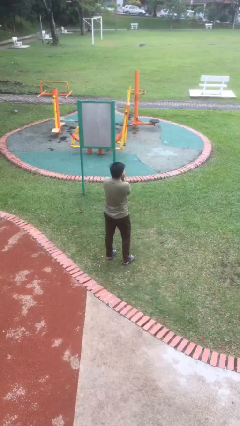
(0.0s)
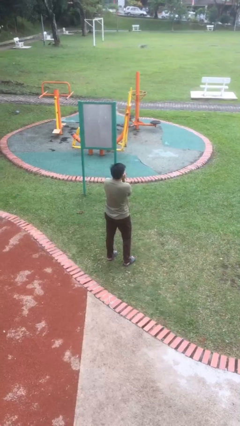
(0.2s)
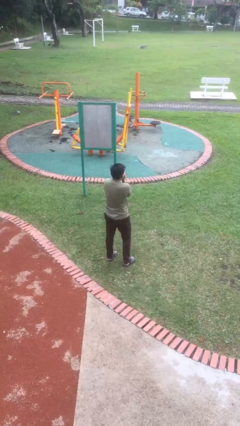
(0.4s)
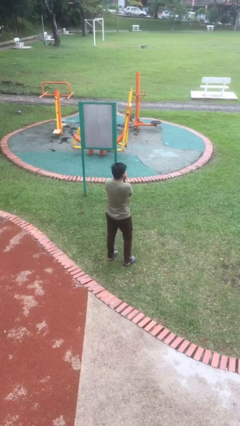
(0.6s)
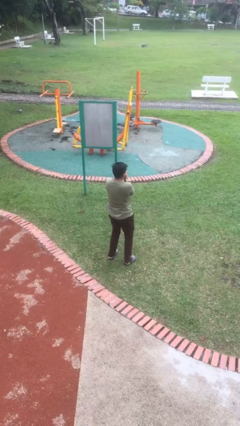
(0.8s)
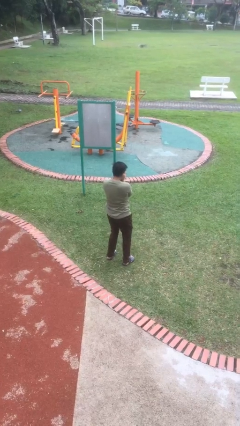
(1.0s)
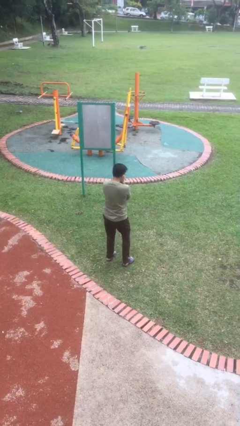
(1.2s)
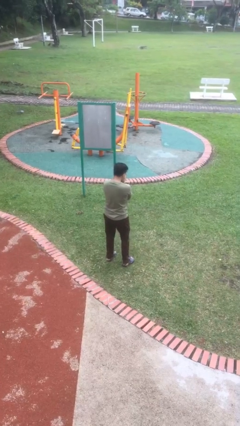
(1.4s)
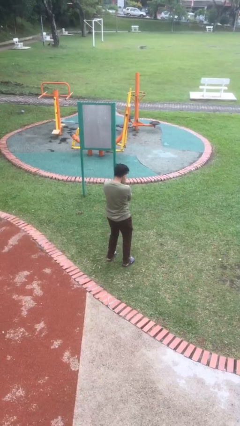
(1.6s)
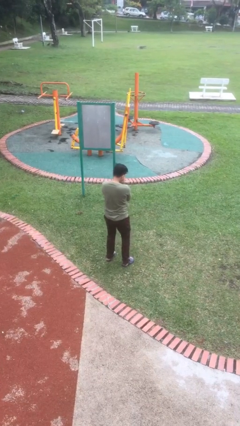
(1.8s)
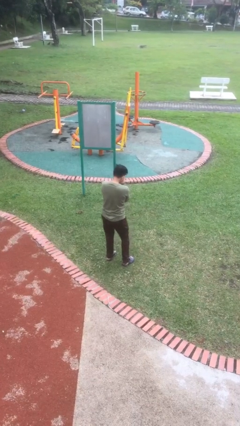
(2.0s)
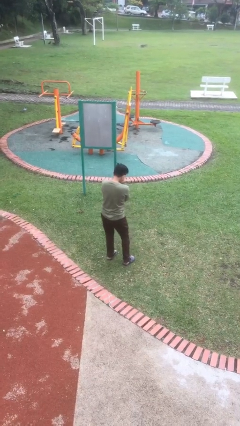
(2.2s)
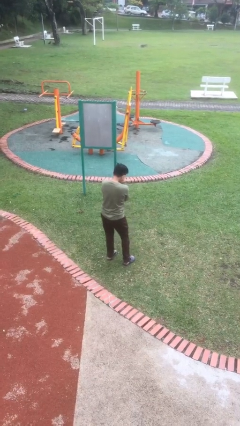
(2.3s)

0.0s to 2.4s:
person wiggles hips

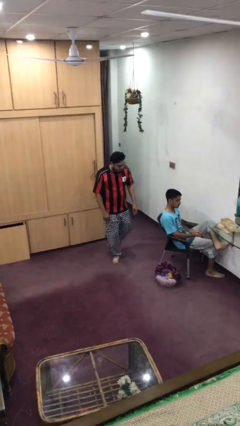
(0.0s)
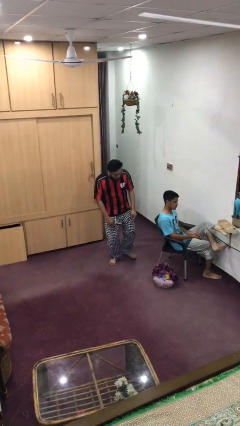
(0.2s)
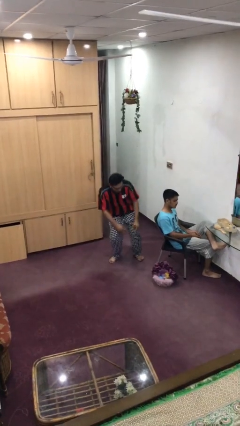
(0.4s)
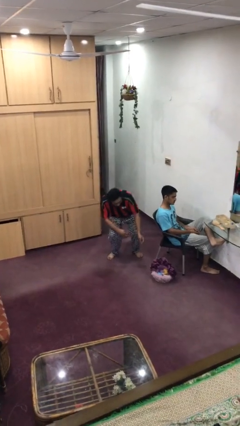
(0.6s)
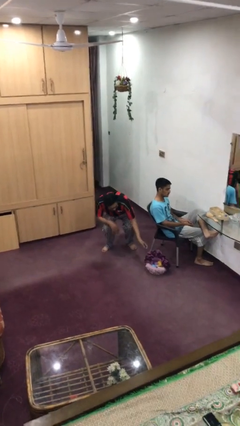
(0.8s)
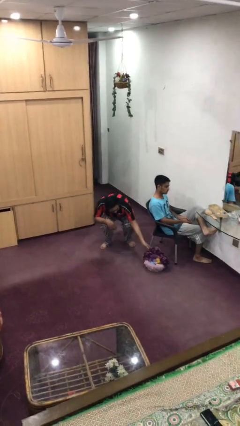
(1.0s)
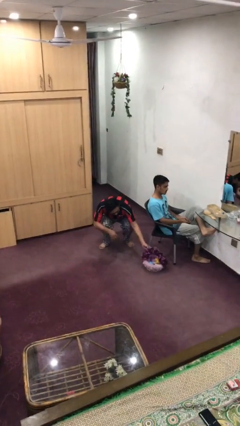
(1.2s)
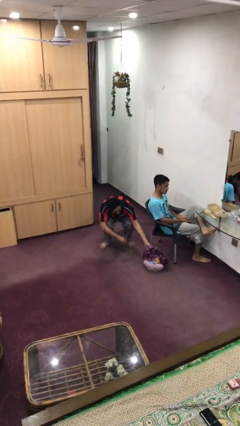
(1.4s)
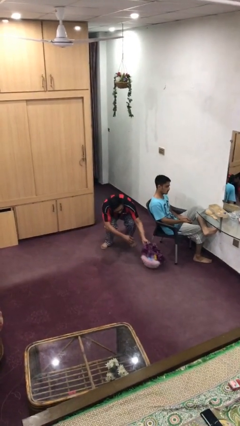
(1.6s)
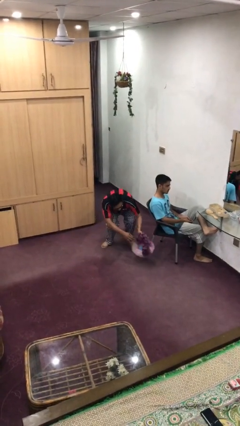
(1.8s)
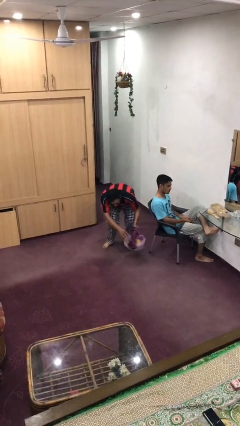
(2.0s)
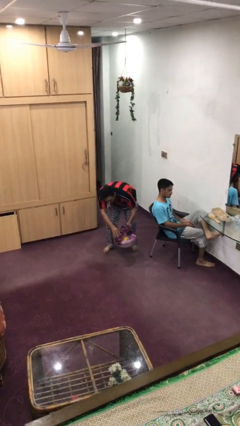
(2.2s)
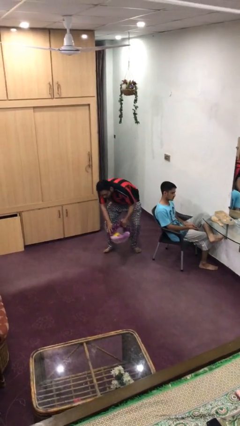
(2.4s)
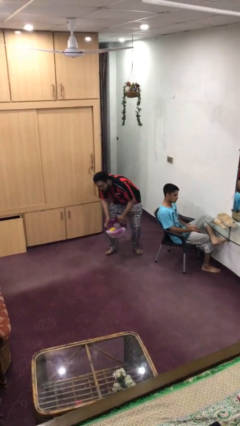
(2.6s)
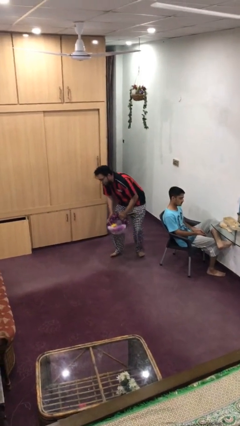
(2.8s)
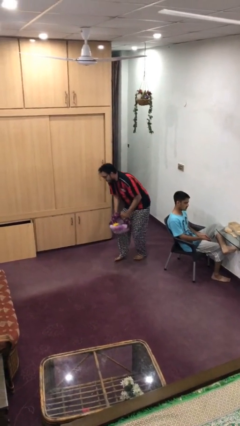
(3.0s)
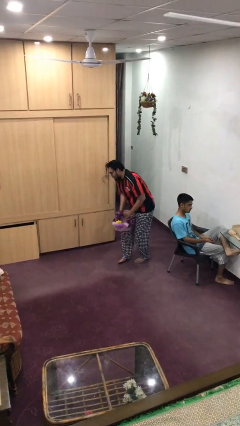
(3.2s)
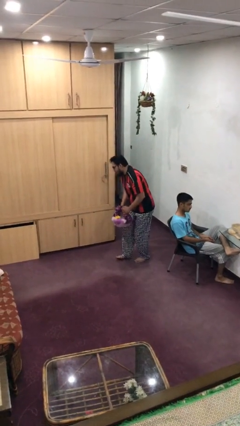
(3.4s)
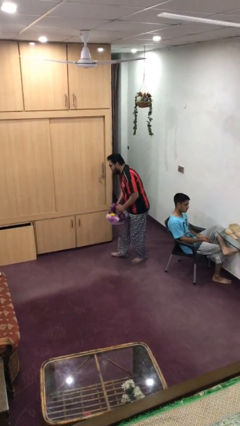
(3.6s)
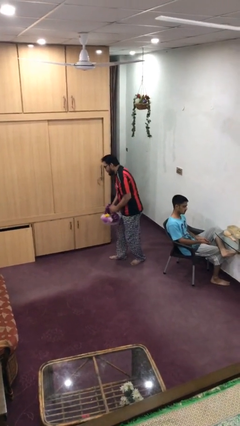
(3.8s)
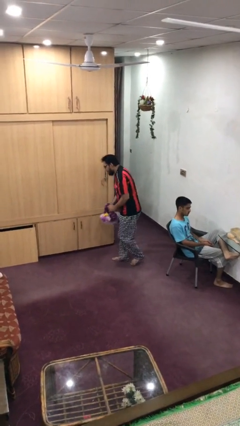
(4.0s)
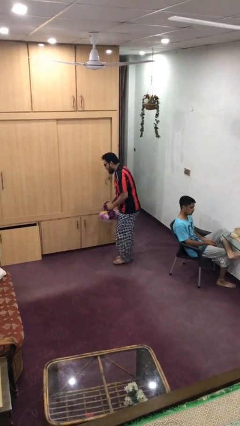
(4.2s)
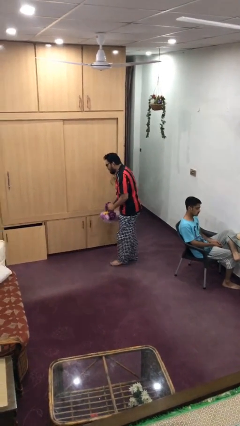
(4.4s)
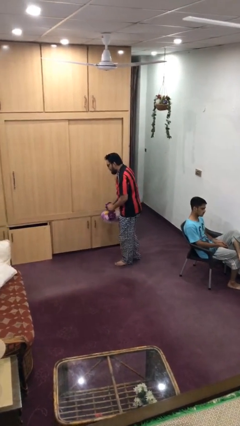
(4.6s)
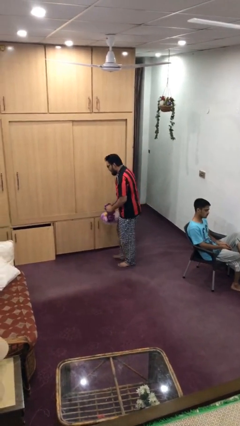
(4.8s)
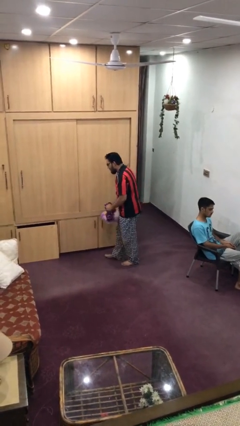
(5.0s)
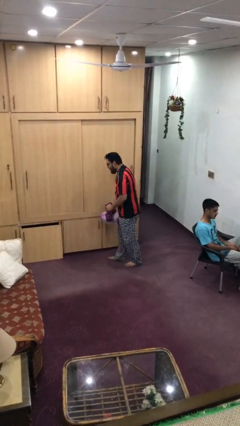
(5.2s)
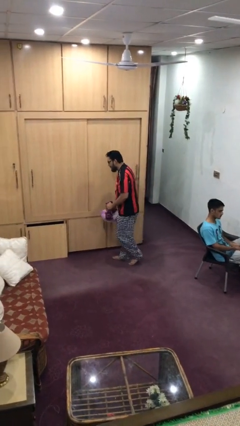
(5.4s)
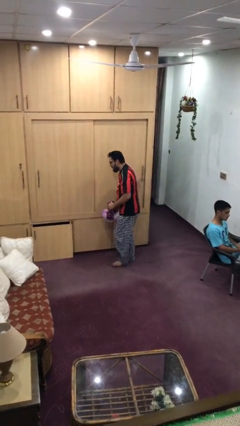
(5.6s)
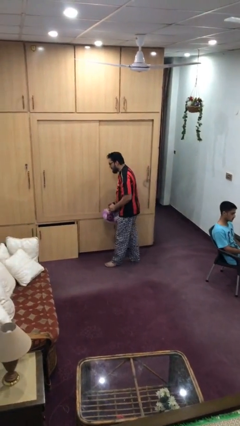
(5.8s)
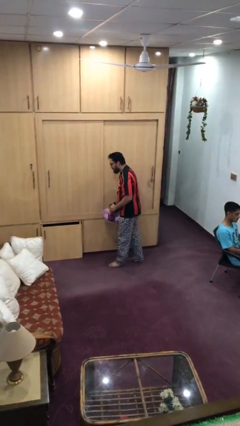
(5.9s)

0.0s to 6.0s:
person steals object from person

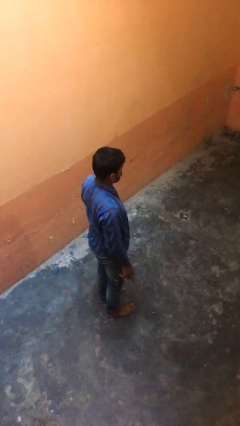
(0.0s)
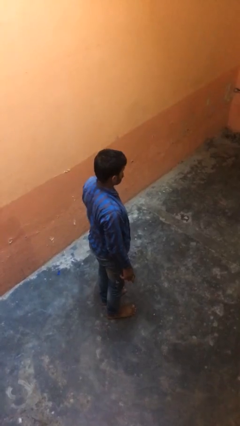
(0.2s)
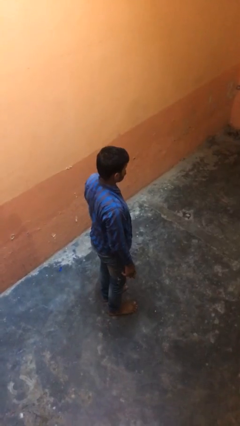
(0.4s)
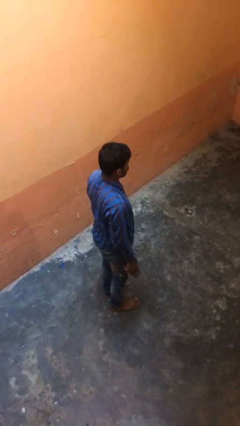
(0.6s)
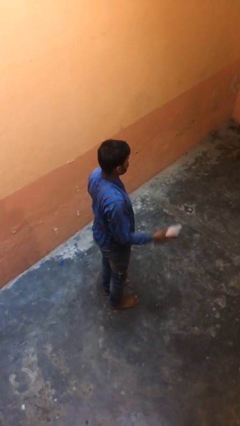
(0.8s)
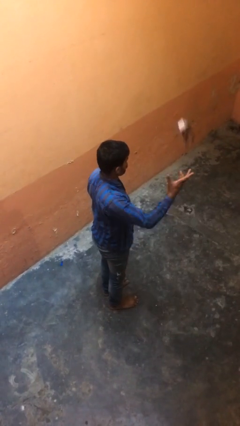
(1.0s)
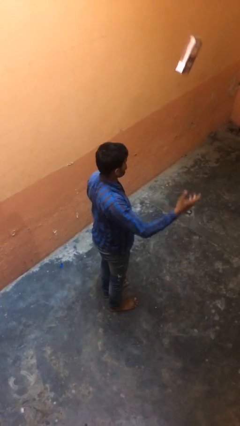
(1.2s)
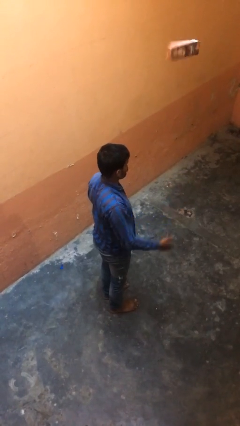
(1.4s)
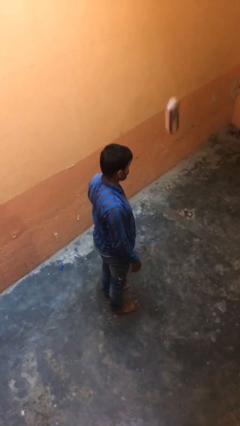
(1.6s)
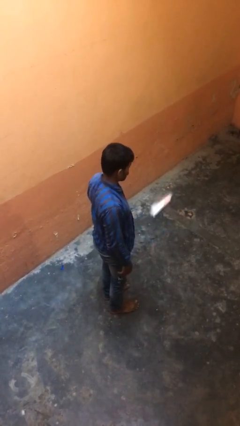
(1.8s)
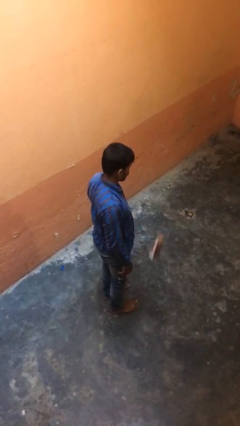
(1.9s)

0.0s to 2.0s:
person throws object into air

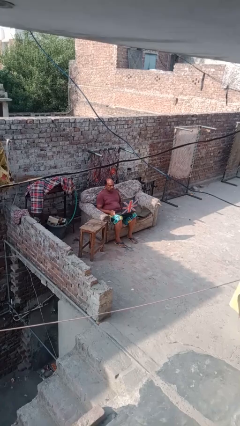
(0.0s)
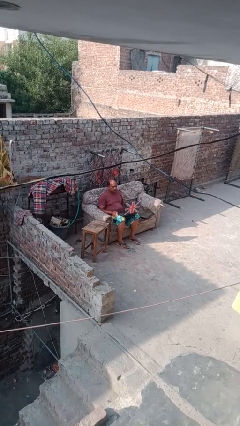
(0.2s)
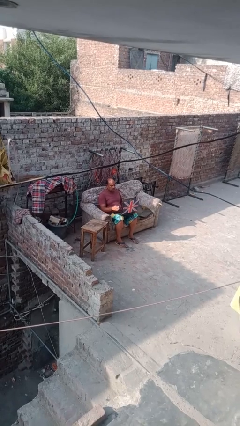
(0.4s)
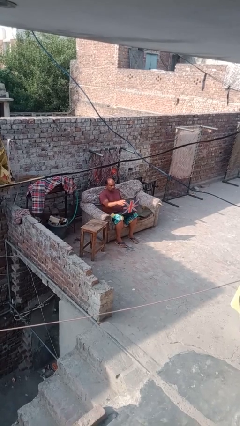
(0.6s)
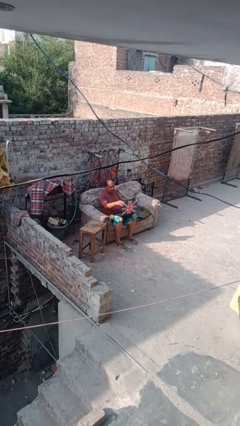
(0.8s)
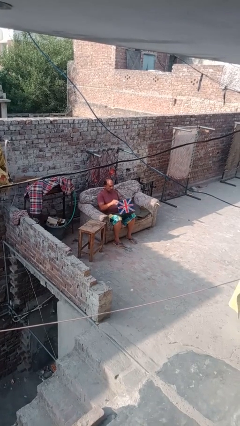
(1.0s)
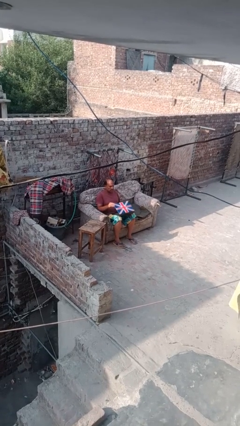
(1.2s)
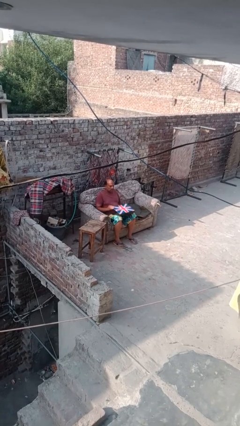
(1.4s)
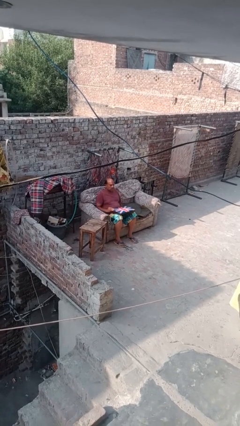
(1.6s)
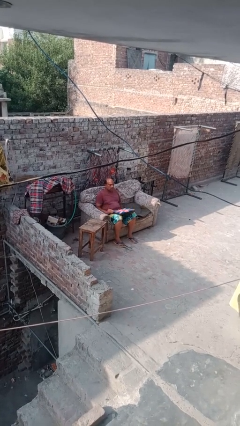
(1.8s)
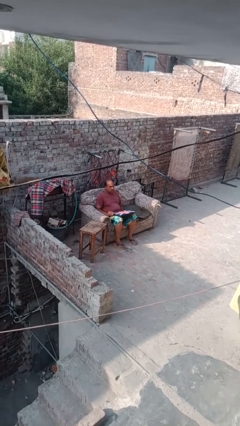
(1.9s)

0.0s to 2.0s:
person closes laptop

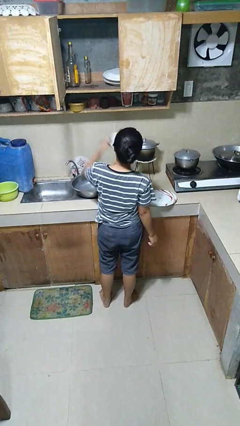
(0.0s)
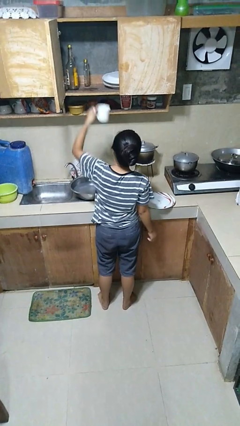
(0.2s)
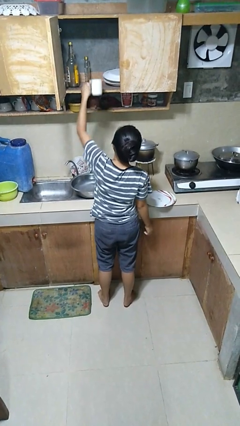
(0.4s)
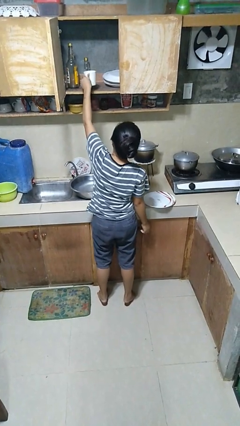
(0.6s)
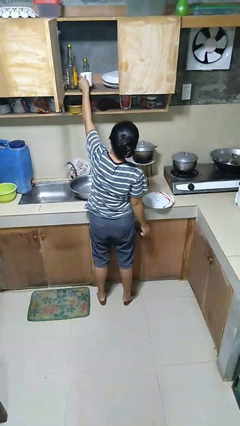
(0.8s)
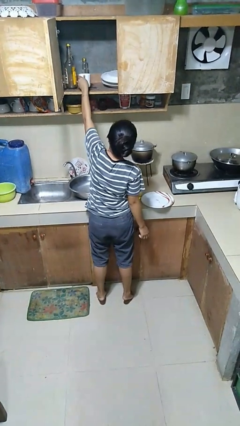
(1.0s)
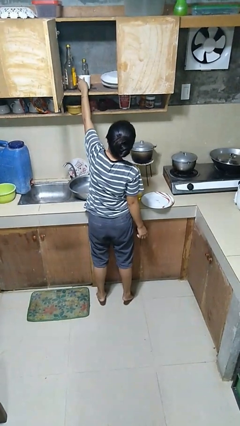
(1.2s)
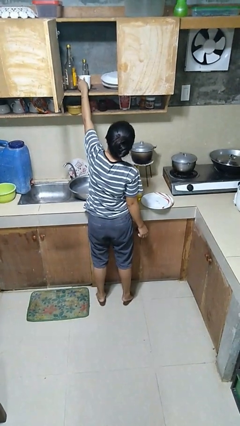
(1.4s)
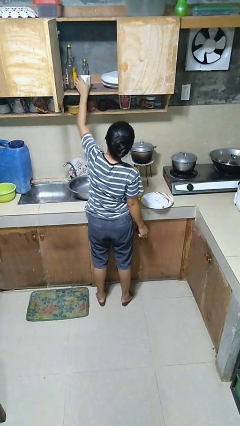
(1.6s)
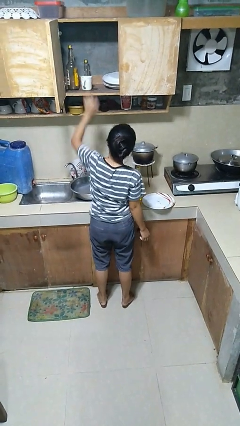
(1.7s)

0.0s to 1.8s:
person puts object in cabinet

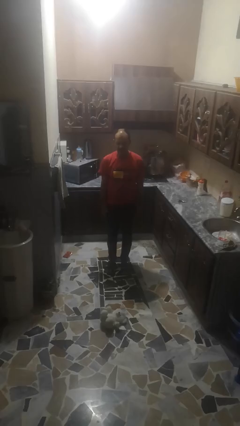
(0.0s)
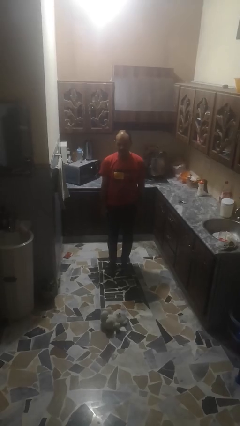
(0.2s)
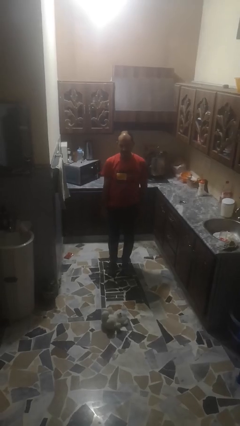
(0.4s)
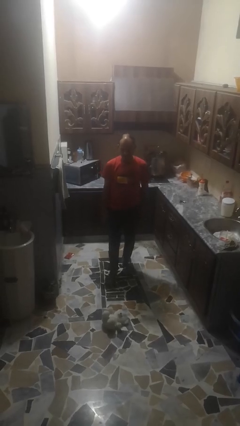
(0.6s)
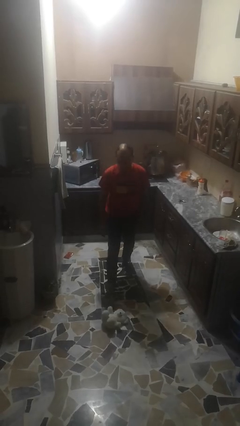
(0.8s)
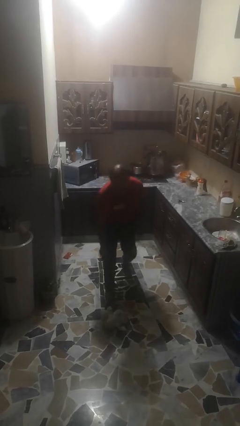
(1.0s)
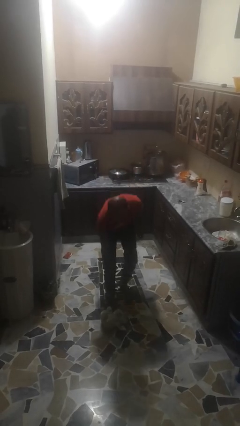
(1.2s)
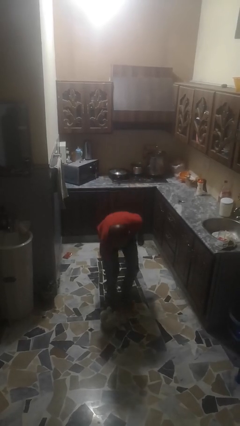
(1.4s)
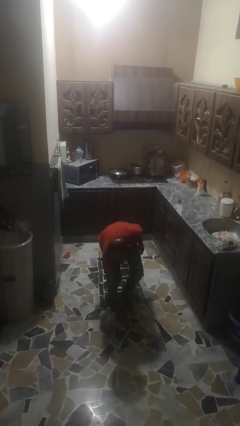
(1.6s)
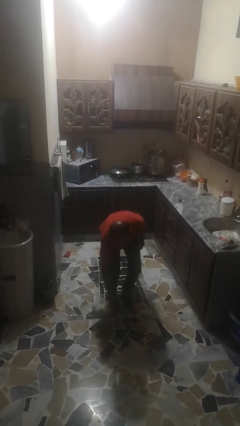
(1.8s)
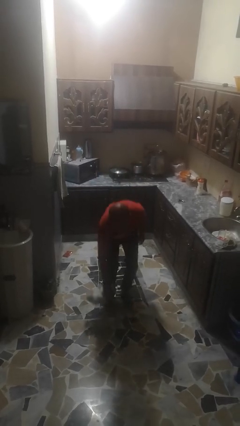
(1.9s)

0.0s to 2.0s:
person picks up object from floor

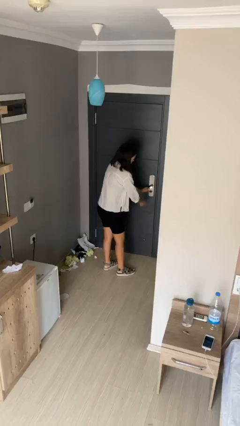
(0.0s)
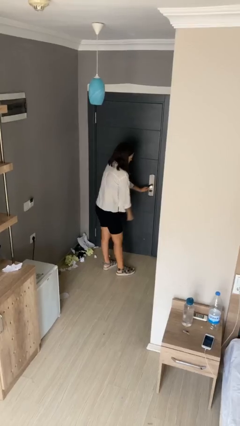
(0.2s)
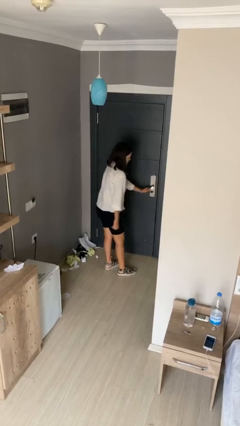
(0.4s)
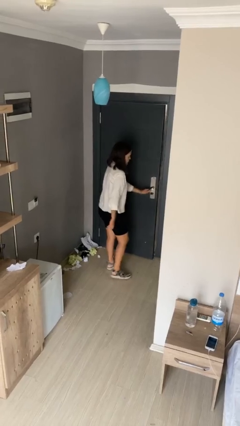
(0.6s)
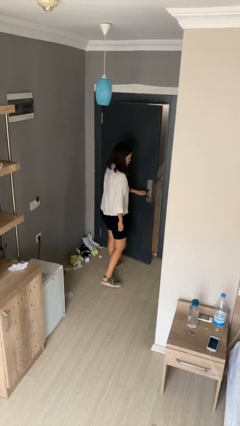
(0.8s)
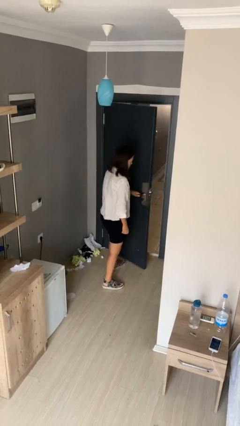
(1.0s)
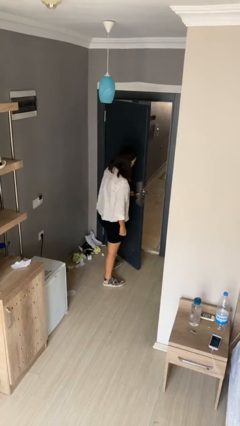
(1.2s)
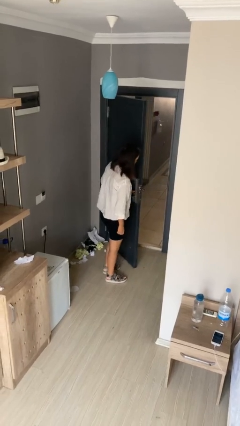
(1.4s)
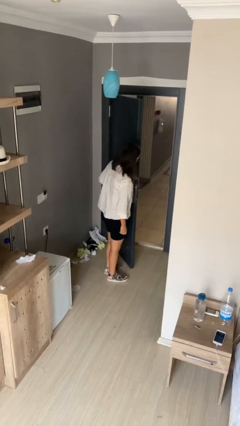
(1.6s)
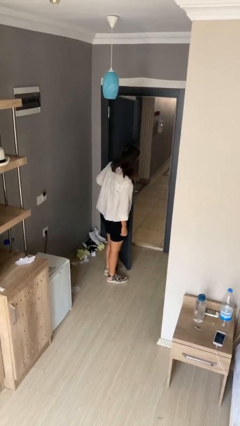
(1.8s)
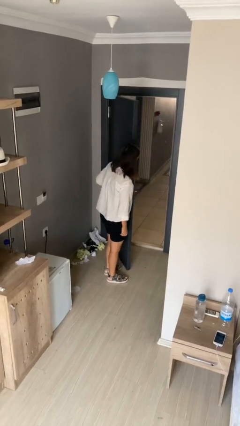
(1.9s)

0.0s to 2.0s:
person opens facility door
